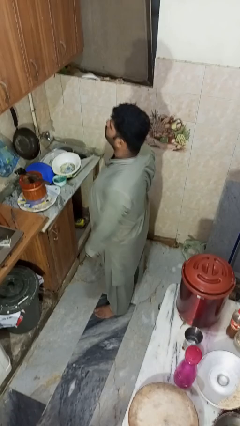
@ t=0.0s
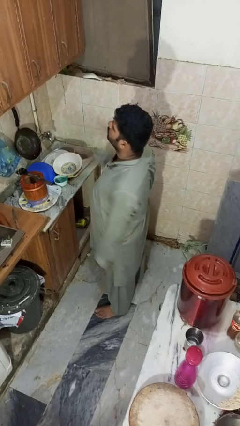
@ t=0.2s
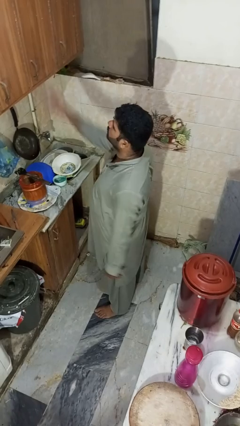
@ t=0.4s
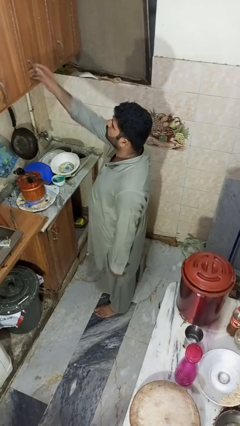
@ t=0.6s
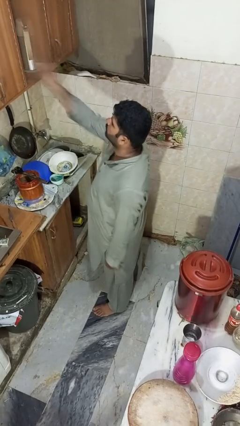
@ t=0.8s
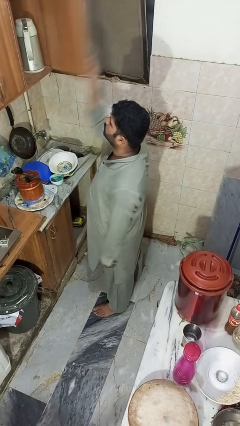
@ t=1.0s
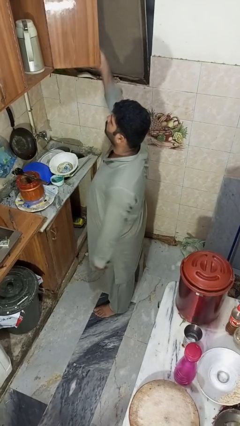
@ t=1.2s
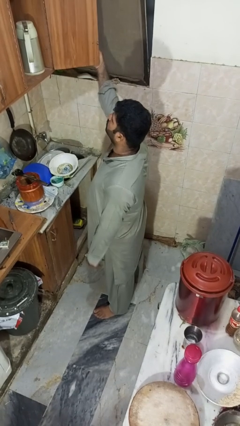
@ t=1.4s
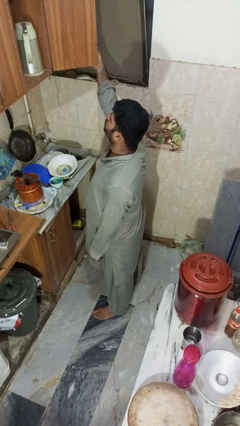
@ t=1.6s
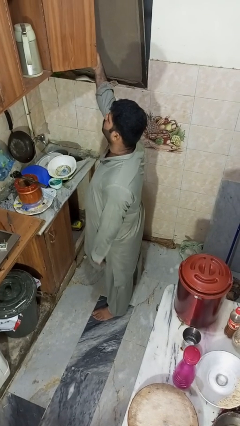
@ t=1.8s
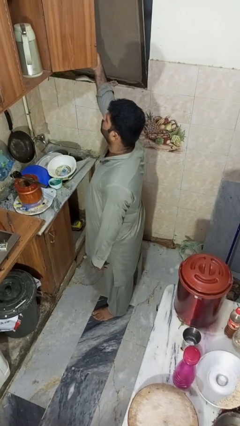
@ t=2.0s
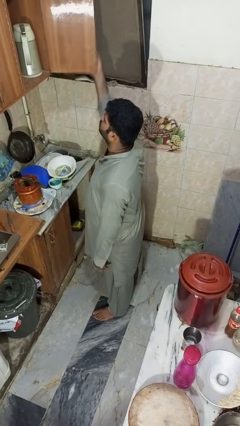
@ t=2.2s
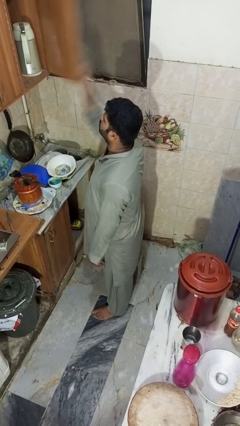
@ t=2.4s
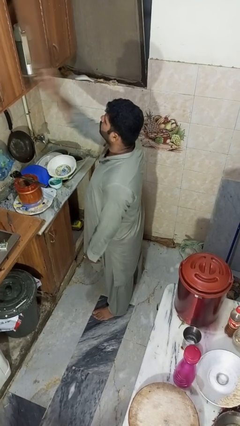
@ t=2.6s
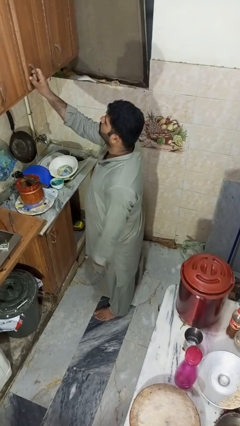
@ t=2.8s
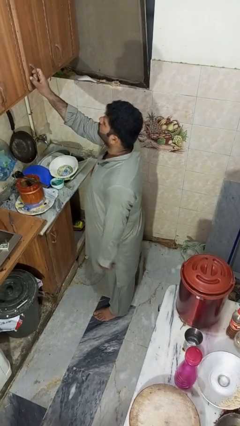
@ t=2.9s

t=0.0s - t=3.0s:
person opens cabinet

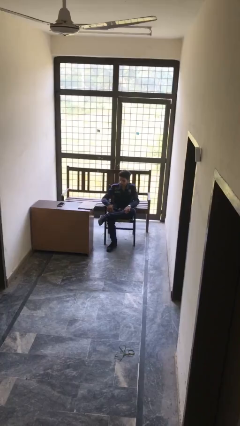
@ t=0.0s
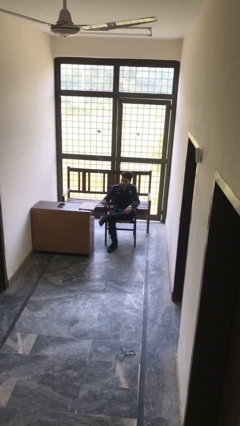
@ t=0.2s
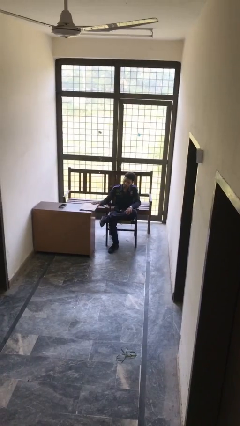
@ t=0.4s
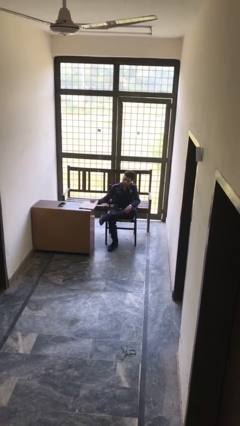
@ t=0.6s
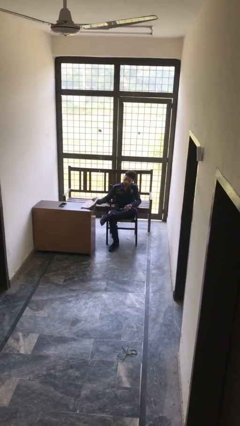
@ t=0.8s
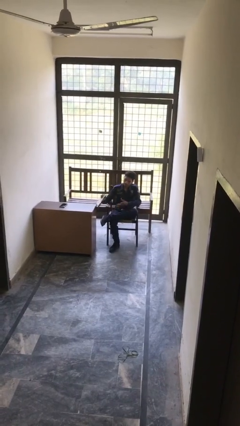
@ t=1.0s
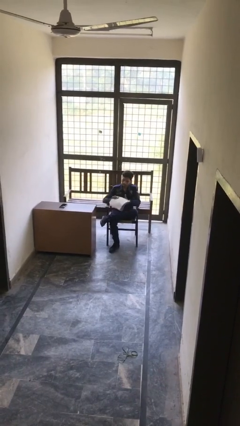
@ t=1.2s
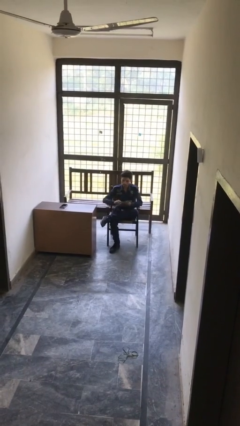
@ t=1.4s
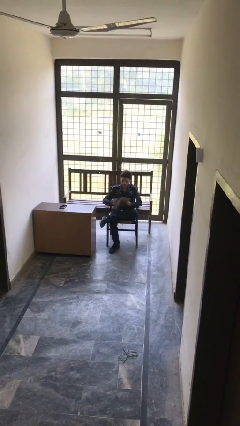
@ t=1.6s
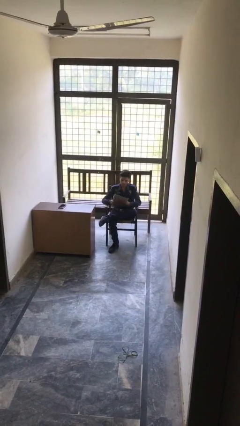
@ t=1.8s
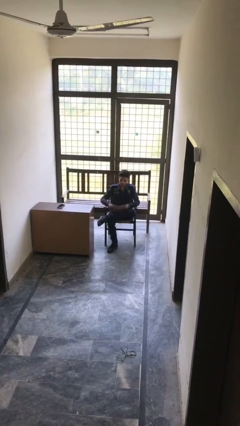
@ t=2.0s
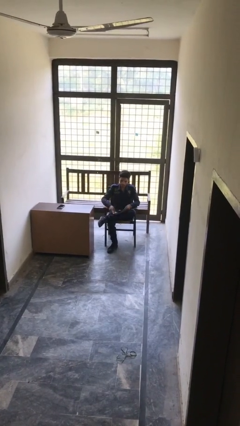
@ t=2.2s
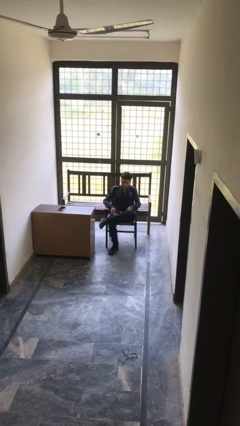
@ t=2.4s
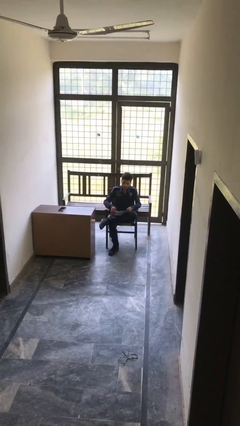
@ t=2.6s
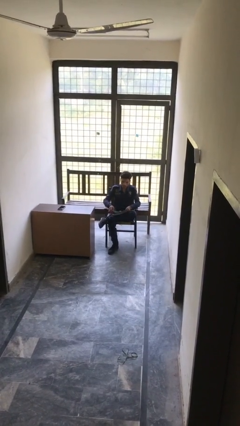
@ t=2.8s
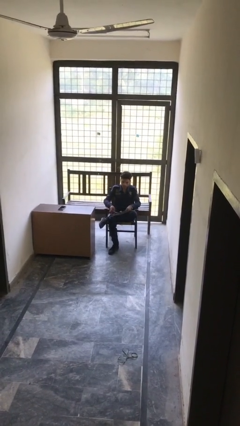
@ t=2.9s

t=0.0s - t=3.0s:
person picks up object from table

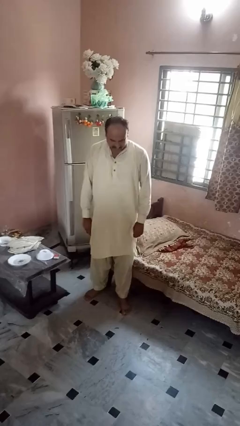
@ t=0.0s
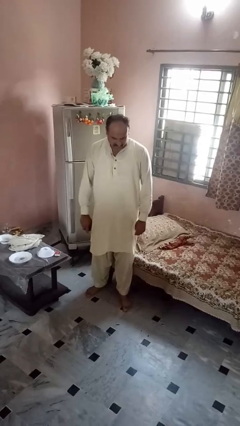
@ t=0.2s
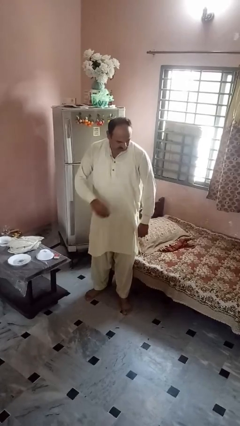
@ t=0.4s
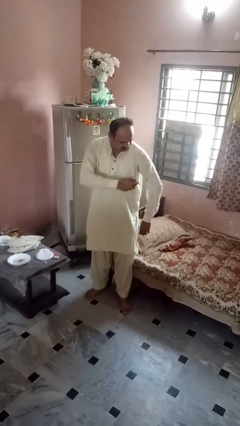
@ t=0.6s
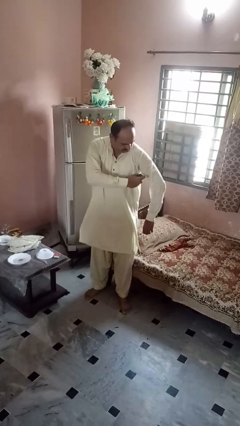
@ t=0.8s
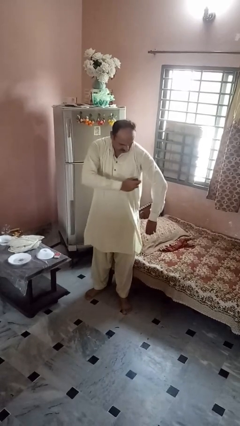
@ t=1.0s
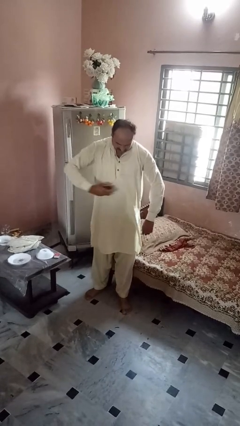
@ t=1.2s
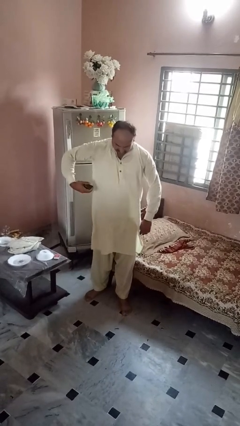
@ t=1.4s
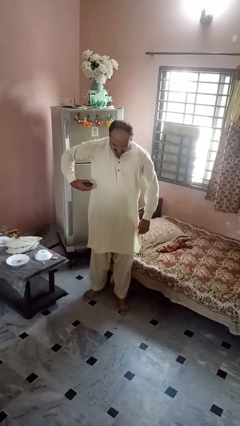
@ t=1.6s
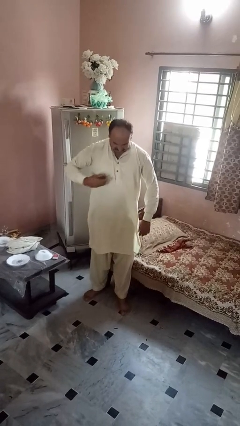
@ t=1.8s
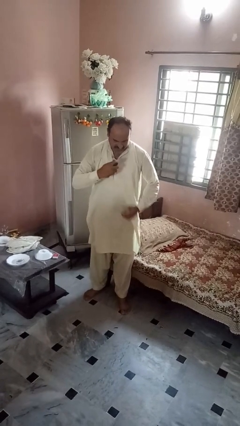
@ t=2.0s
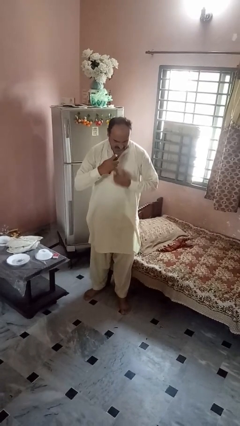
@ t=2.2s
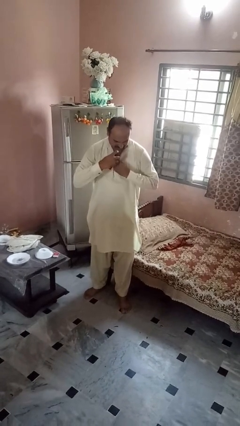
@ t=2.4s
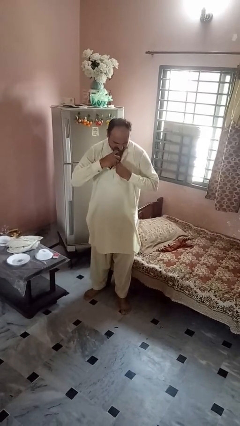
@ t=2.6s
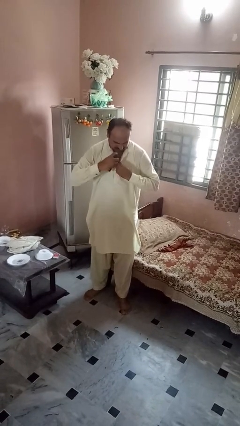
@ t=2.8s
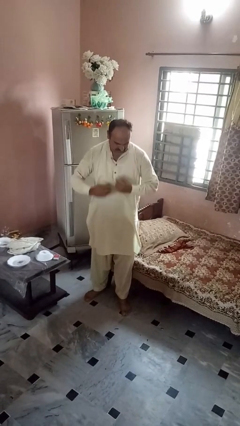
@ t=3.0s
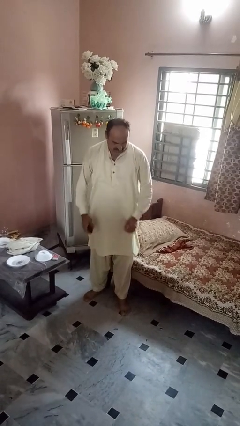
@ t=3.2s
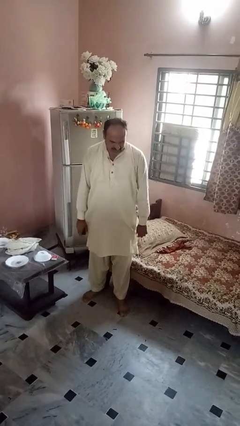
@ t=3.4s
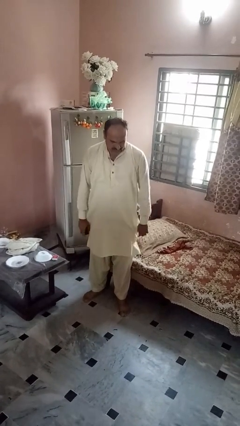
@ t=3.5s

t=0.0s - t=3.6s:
person applies deodorant

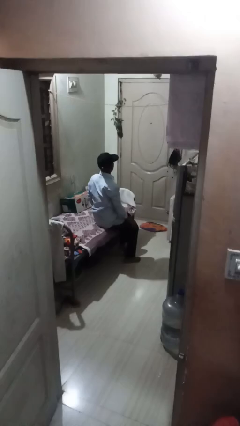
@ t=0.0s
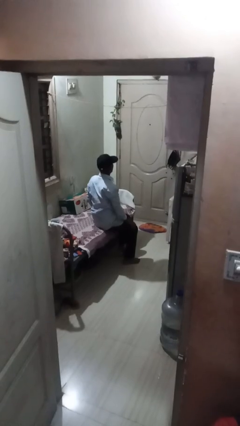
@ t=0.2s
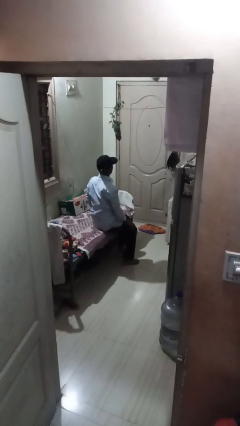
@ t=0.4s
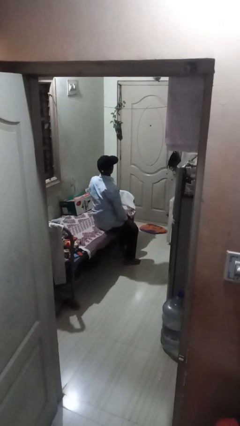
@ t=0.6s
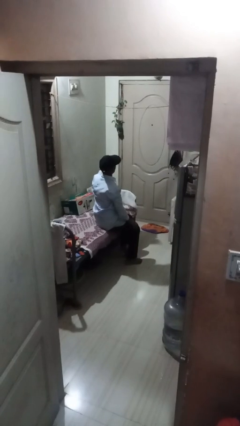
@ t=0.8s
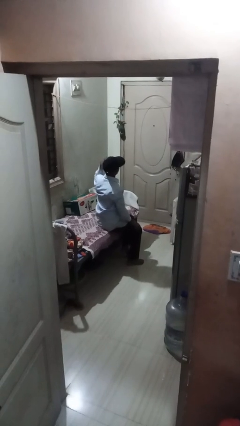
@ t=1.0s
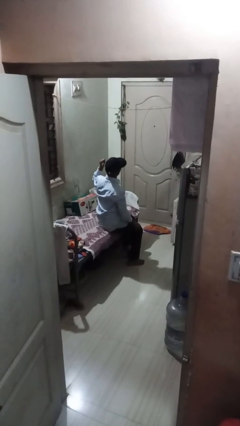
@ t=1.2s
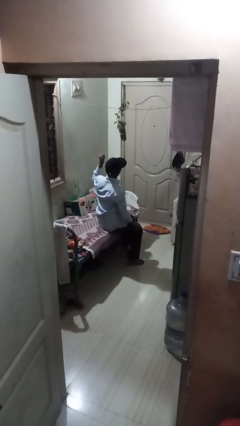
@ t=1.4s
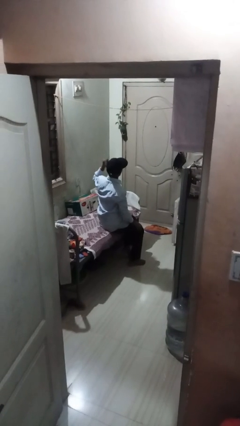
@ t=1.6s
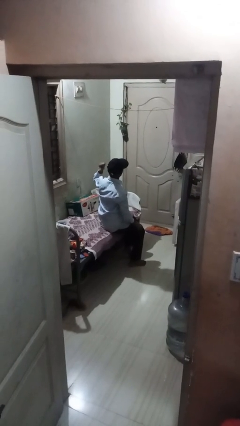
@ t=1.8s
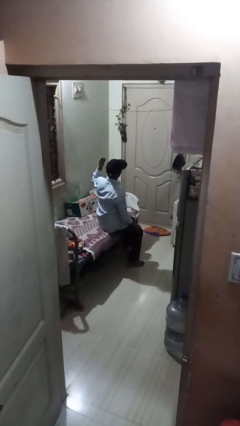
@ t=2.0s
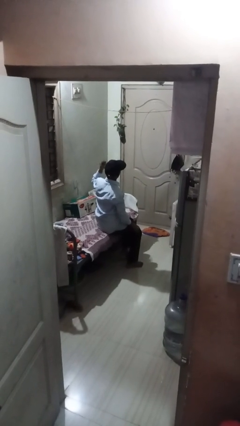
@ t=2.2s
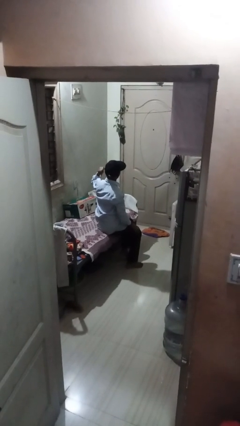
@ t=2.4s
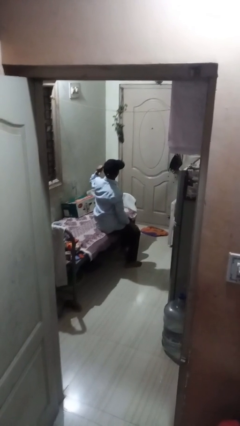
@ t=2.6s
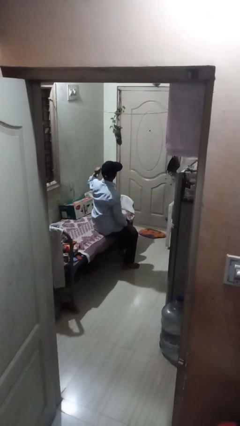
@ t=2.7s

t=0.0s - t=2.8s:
person gestures behind me

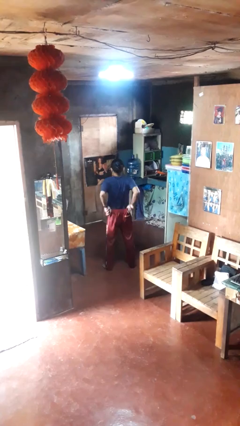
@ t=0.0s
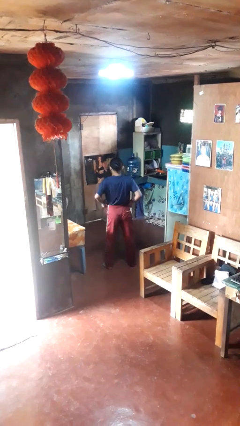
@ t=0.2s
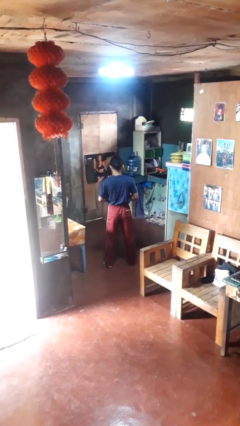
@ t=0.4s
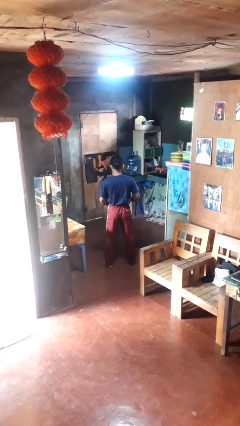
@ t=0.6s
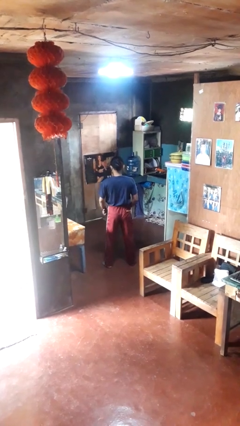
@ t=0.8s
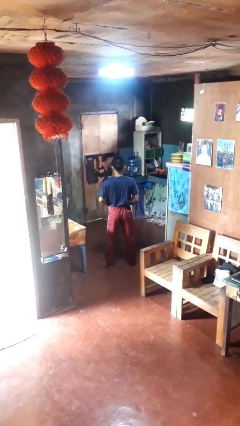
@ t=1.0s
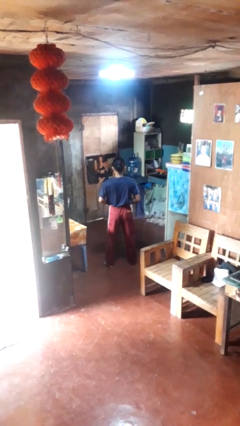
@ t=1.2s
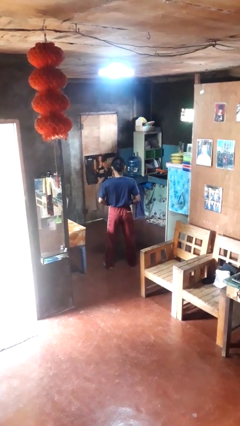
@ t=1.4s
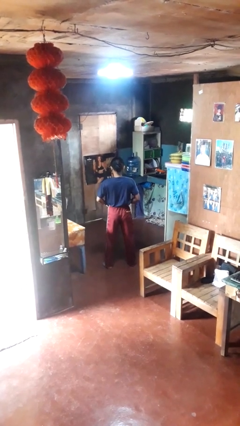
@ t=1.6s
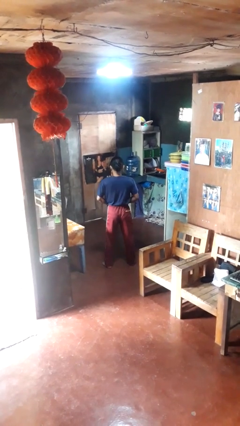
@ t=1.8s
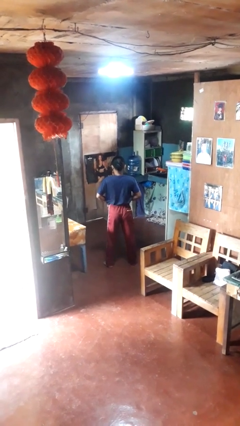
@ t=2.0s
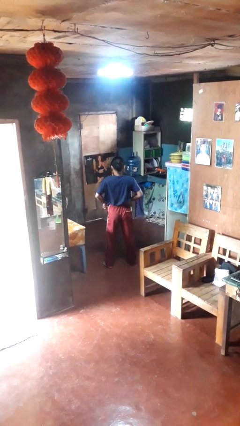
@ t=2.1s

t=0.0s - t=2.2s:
person hikes up pants

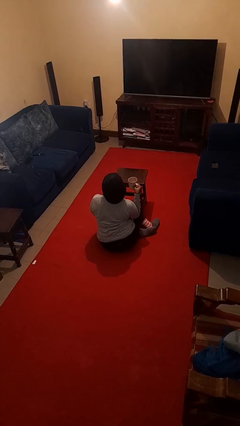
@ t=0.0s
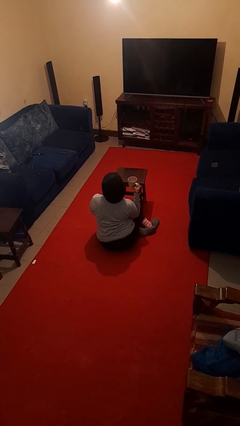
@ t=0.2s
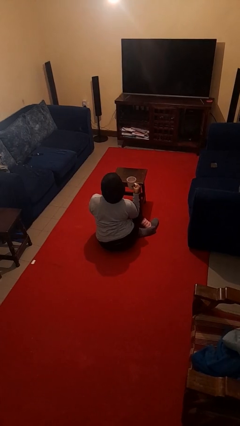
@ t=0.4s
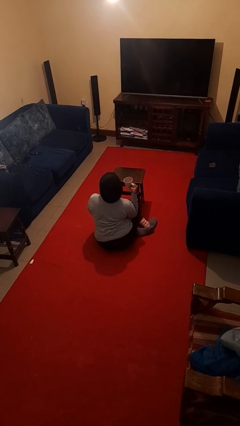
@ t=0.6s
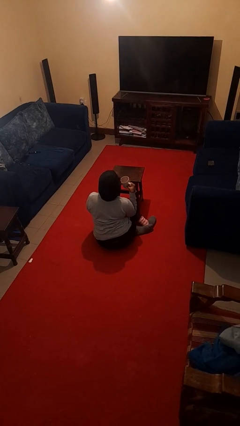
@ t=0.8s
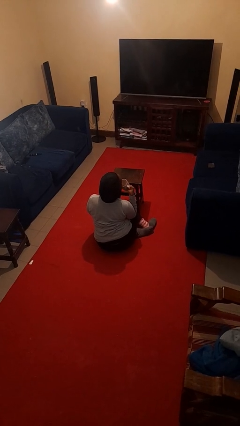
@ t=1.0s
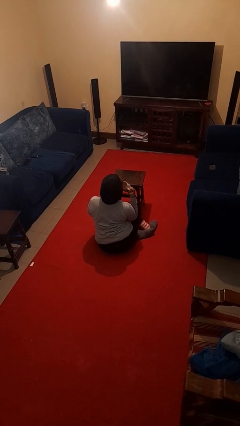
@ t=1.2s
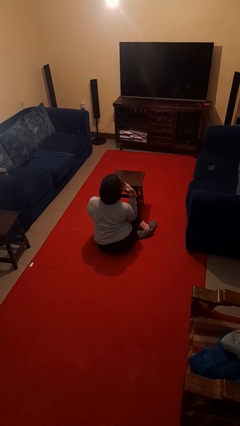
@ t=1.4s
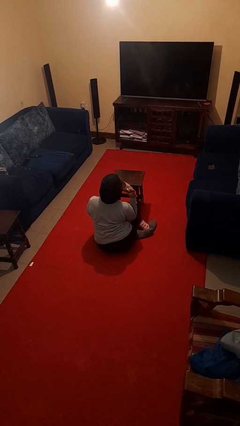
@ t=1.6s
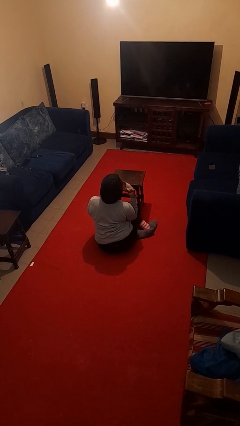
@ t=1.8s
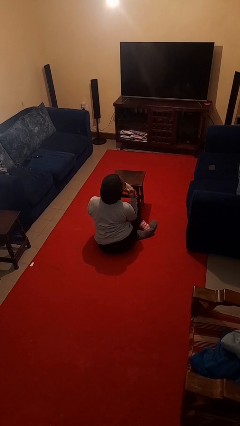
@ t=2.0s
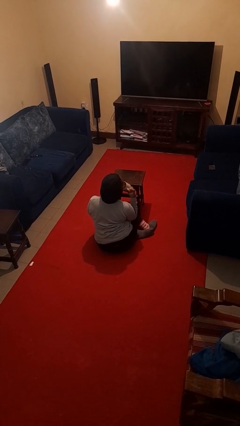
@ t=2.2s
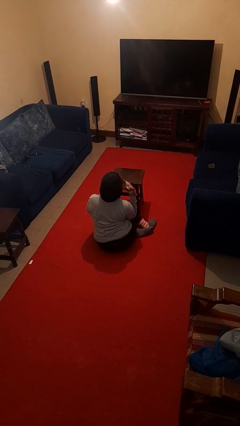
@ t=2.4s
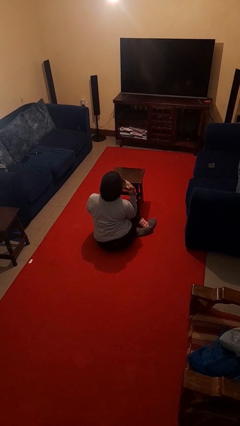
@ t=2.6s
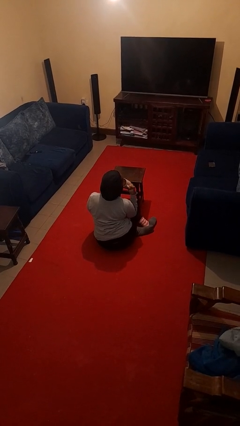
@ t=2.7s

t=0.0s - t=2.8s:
person drinks from mug

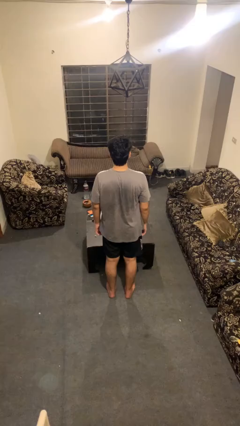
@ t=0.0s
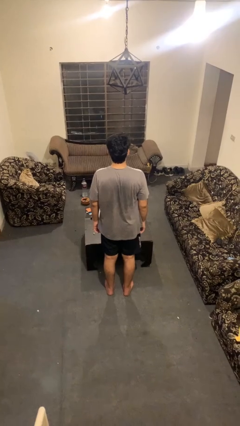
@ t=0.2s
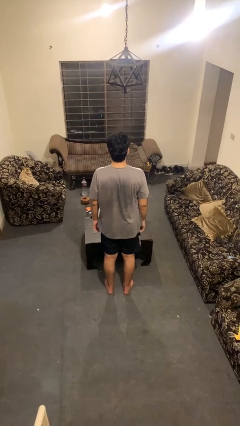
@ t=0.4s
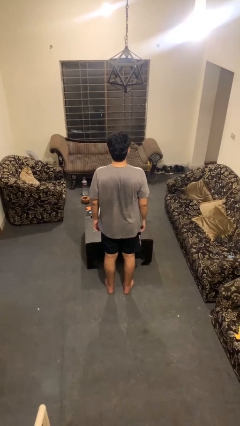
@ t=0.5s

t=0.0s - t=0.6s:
person strokes hair
